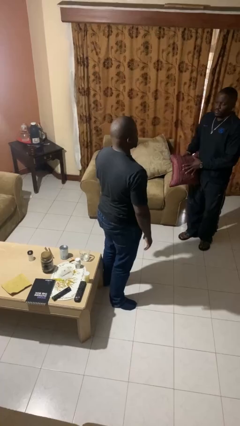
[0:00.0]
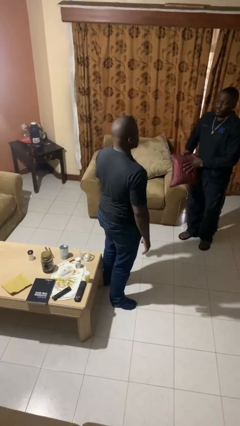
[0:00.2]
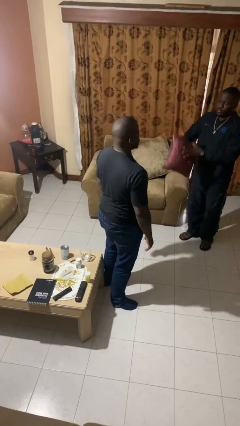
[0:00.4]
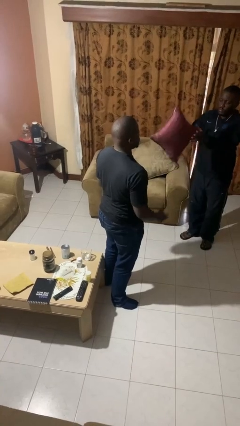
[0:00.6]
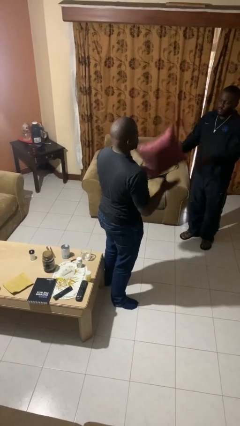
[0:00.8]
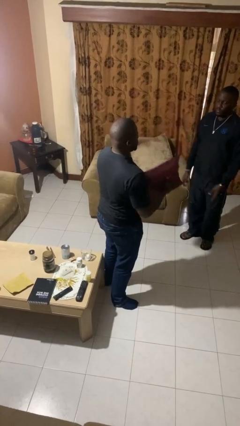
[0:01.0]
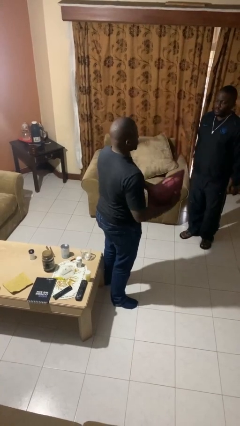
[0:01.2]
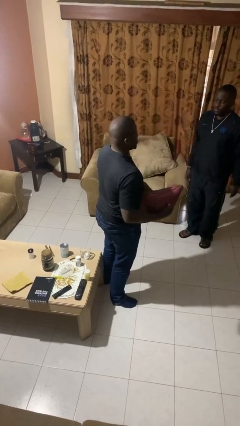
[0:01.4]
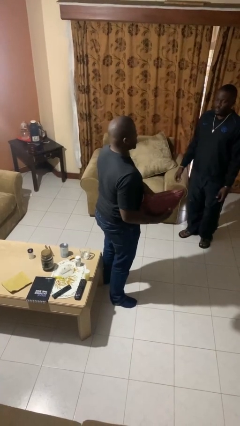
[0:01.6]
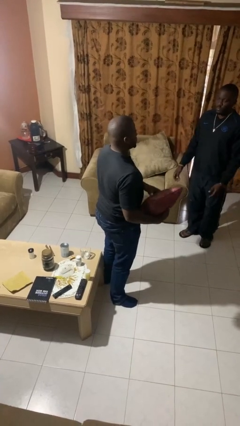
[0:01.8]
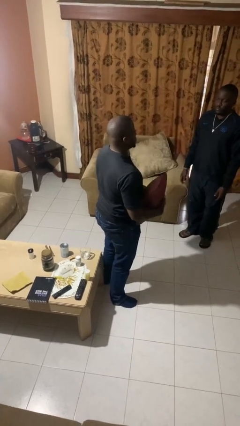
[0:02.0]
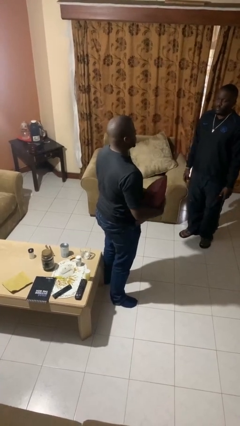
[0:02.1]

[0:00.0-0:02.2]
person catches object from person

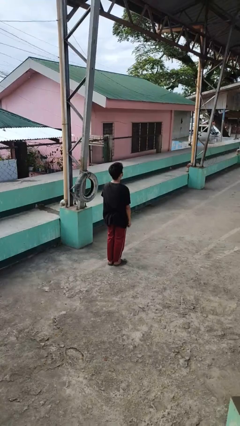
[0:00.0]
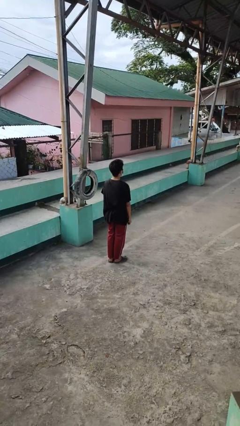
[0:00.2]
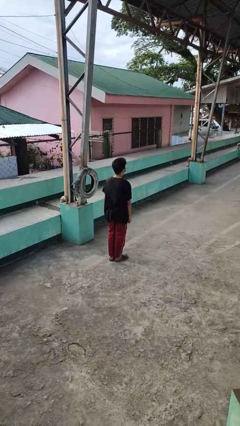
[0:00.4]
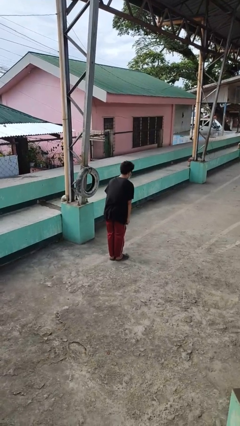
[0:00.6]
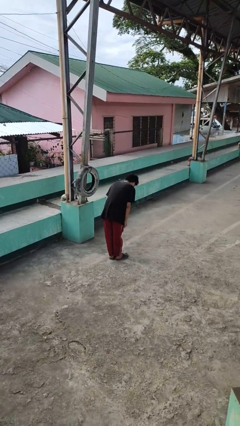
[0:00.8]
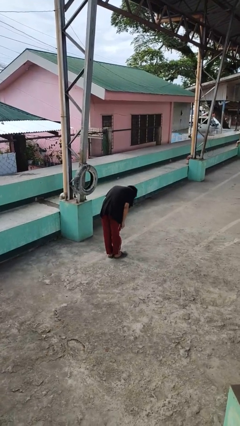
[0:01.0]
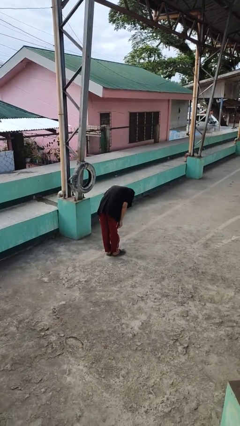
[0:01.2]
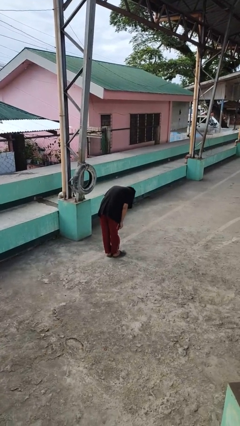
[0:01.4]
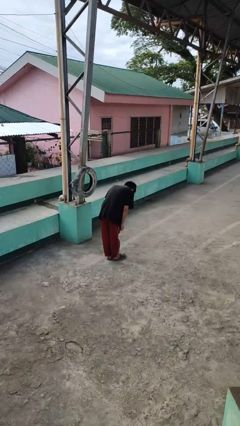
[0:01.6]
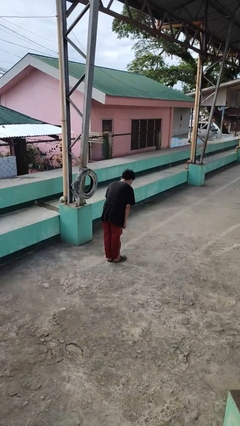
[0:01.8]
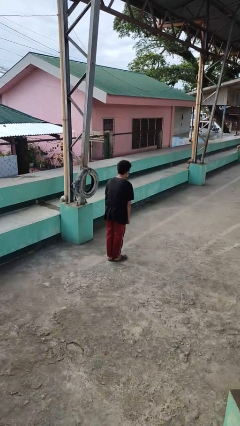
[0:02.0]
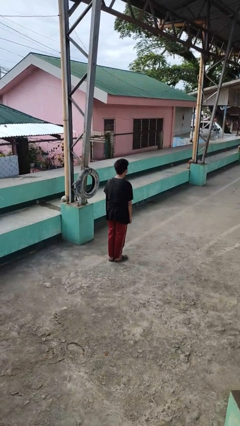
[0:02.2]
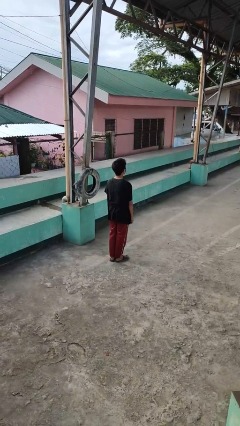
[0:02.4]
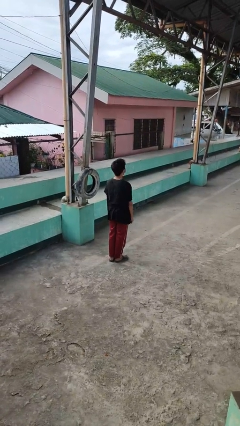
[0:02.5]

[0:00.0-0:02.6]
person bows

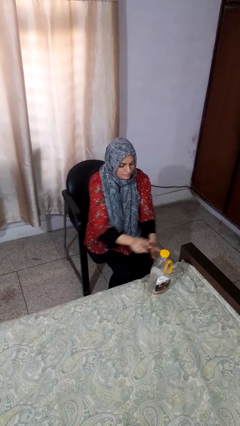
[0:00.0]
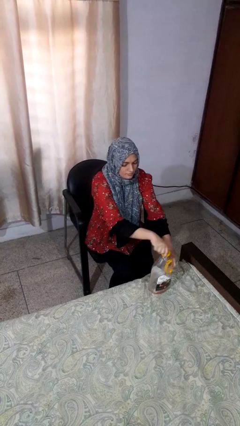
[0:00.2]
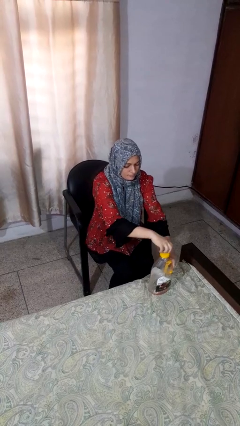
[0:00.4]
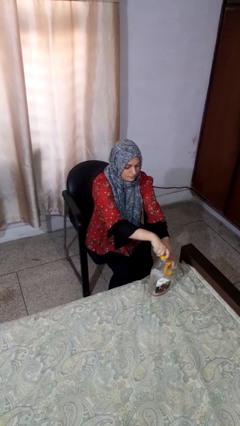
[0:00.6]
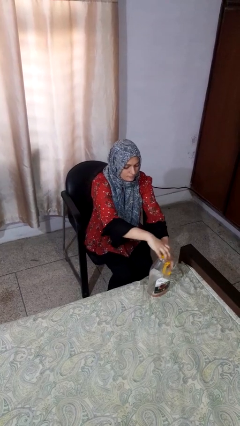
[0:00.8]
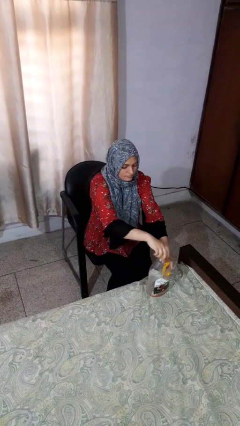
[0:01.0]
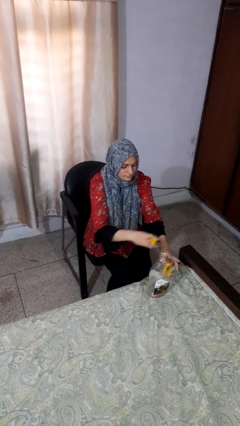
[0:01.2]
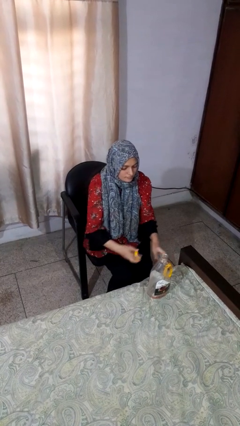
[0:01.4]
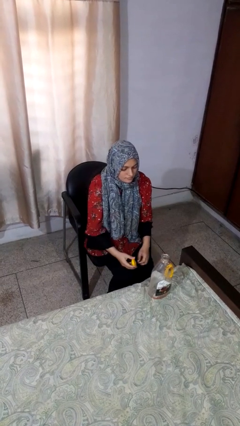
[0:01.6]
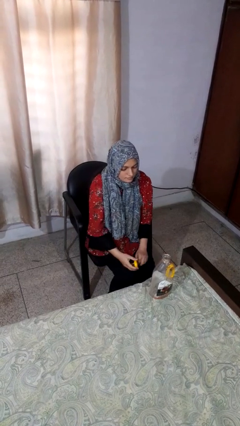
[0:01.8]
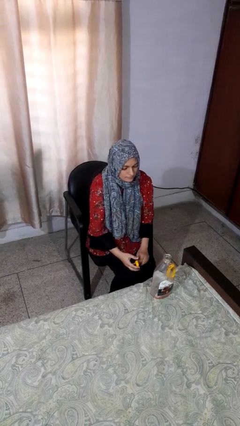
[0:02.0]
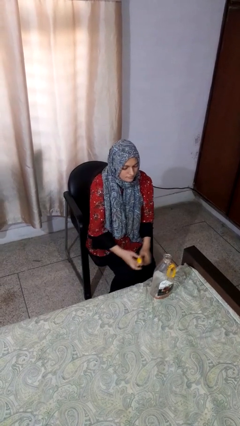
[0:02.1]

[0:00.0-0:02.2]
person unscrews lid from bottle

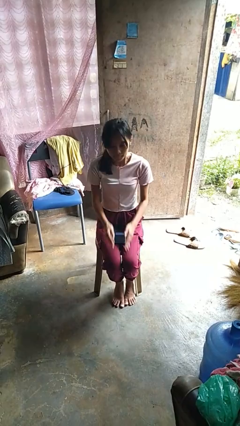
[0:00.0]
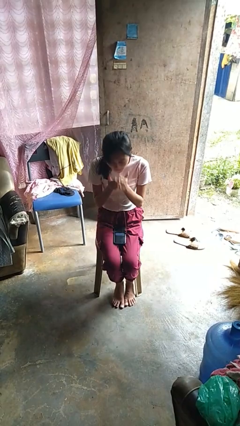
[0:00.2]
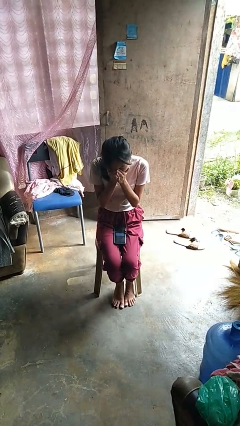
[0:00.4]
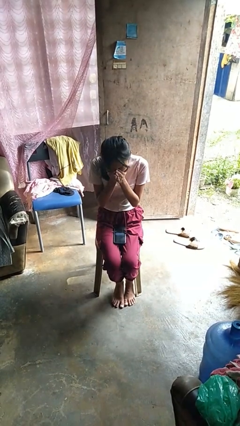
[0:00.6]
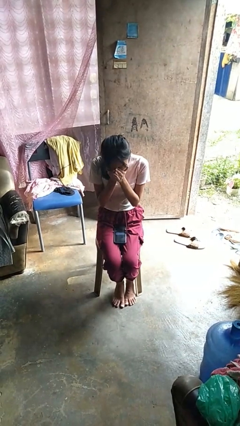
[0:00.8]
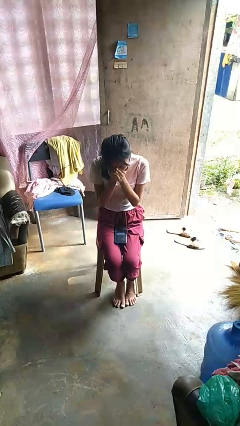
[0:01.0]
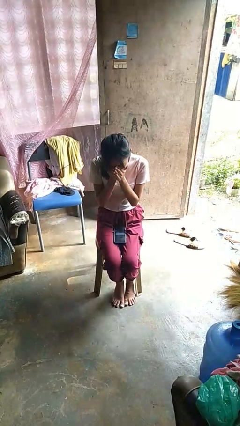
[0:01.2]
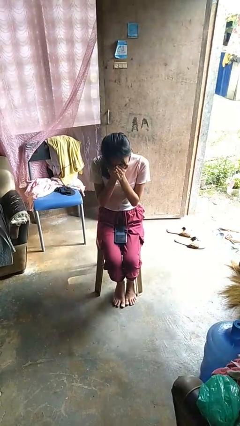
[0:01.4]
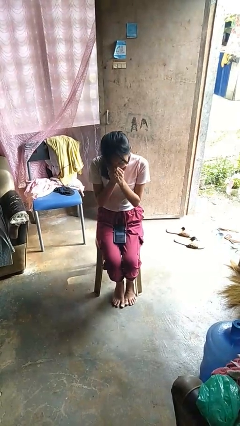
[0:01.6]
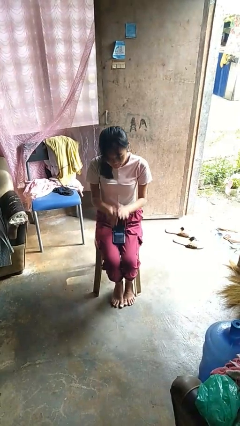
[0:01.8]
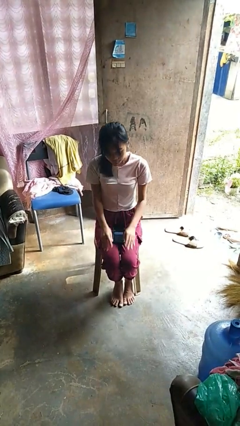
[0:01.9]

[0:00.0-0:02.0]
person sneezes into hand

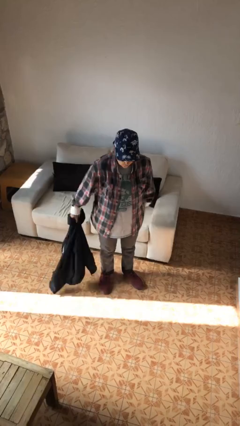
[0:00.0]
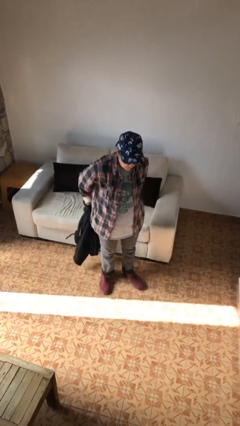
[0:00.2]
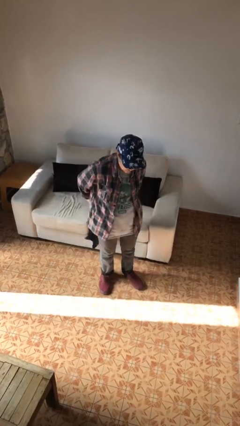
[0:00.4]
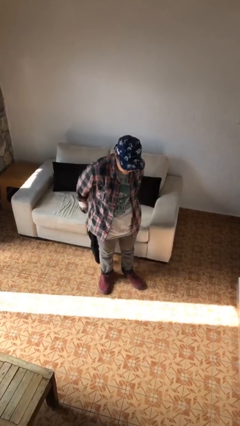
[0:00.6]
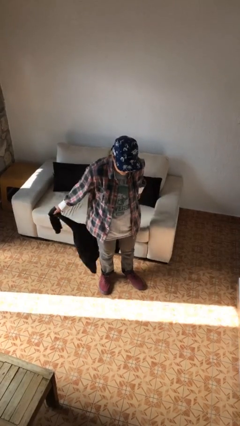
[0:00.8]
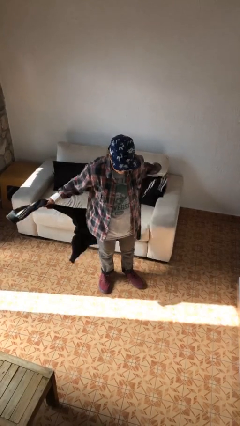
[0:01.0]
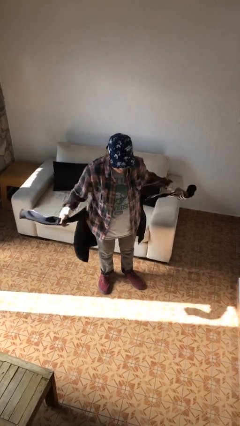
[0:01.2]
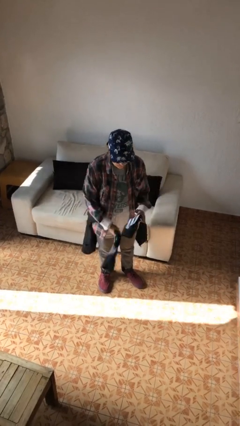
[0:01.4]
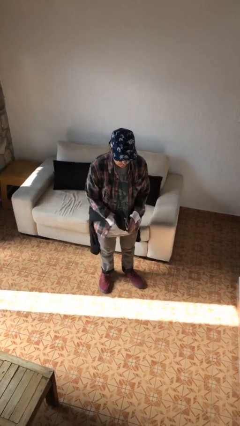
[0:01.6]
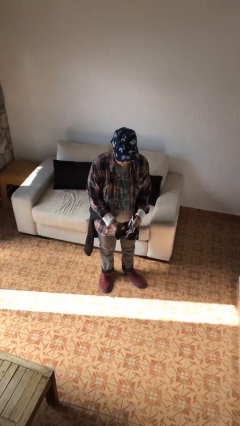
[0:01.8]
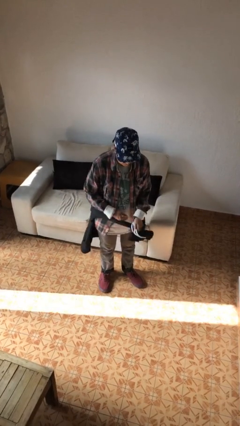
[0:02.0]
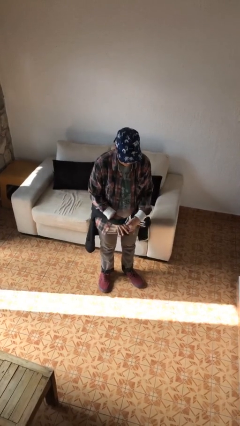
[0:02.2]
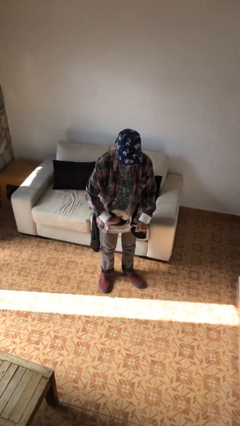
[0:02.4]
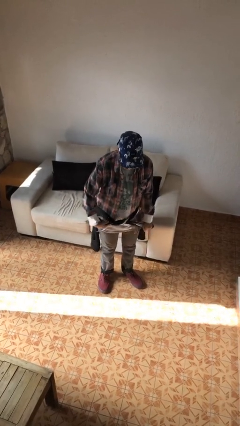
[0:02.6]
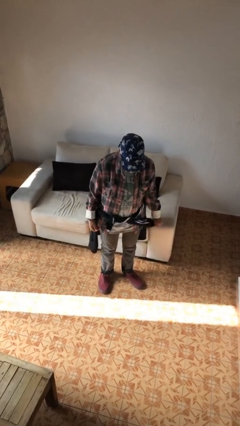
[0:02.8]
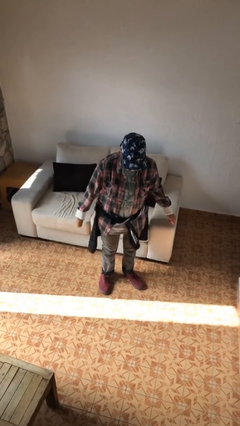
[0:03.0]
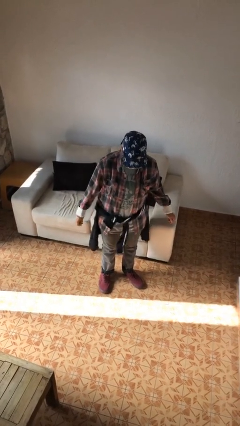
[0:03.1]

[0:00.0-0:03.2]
person ties jacket around waist

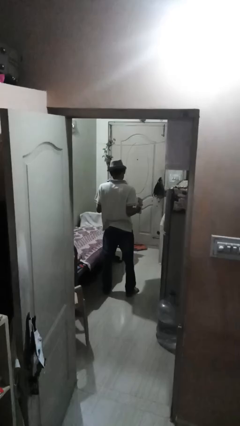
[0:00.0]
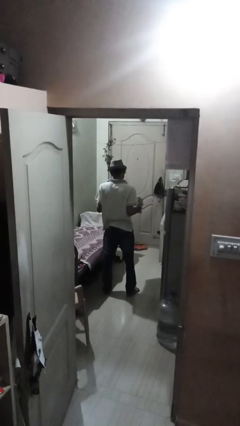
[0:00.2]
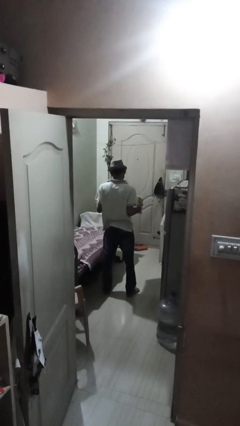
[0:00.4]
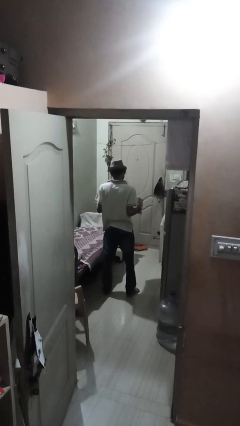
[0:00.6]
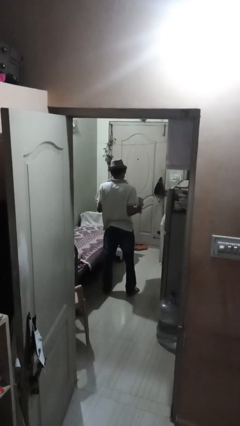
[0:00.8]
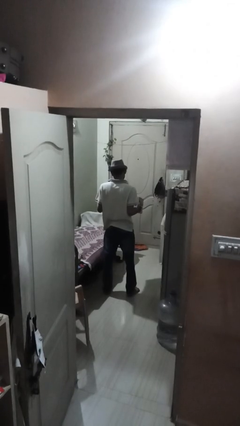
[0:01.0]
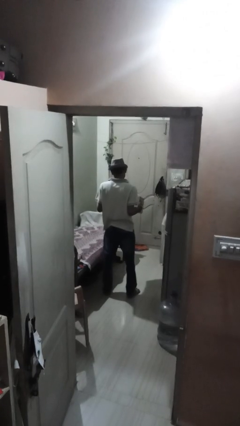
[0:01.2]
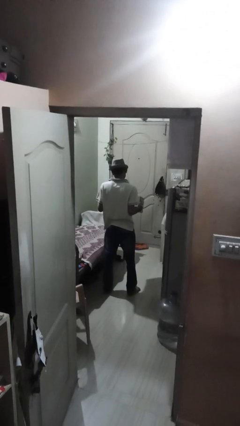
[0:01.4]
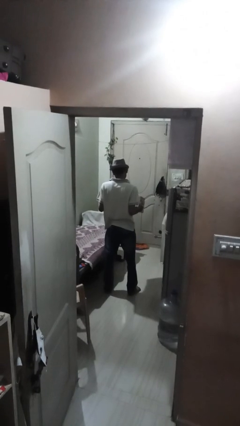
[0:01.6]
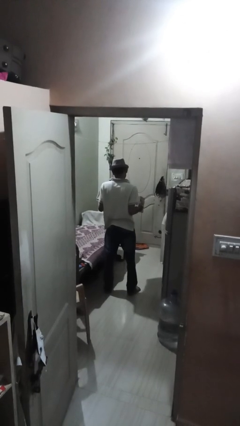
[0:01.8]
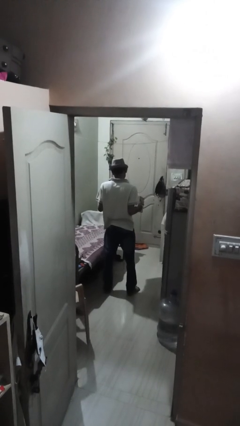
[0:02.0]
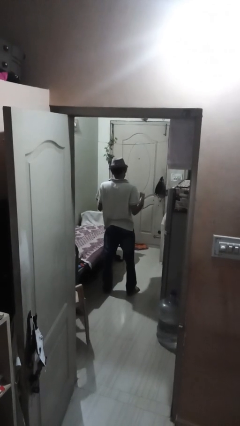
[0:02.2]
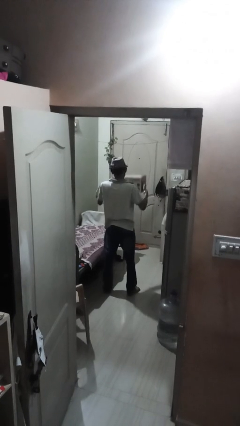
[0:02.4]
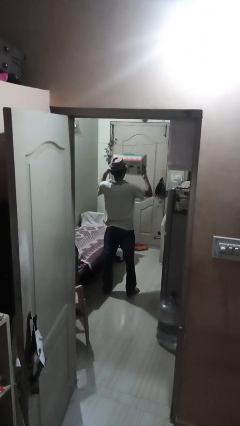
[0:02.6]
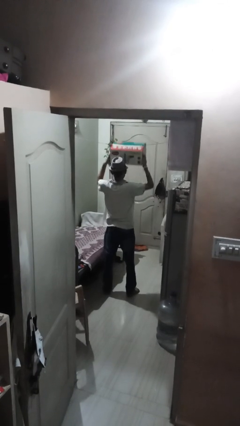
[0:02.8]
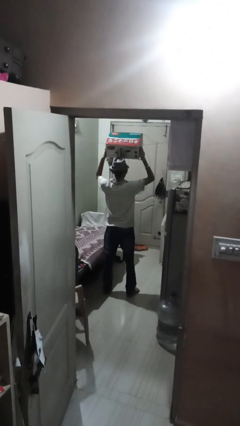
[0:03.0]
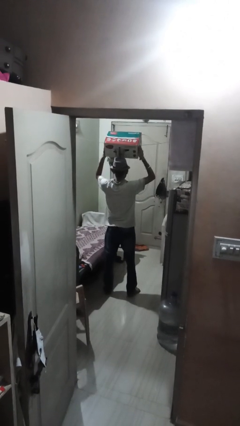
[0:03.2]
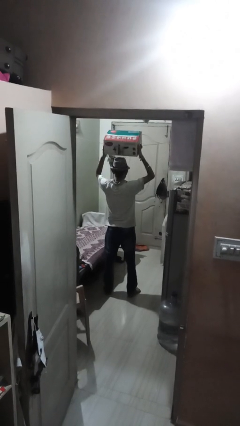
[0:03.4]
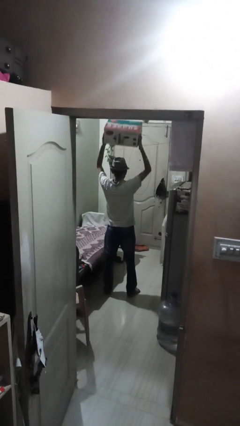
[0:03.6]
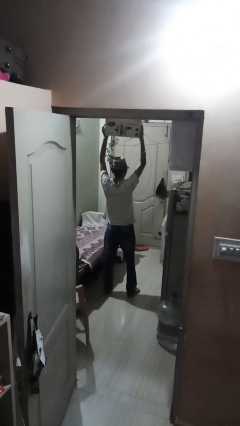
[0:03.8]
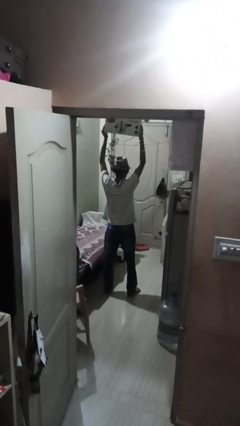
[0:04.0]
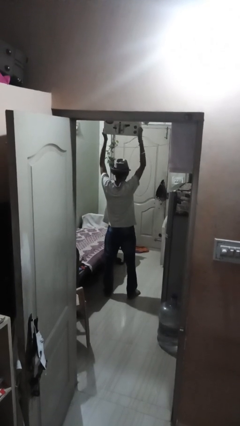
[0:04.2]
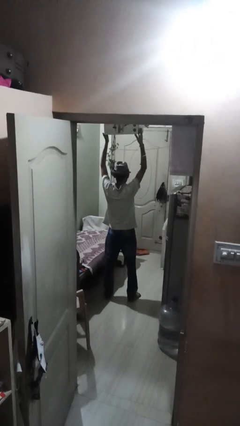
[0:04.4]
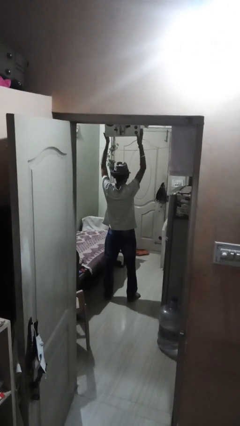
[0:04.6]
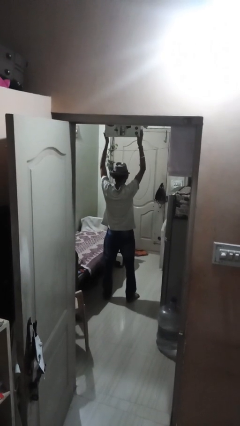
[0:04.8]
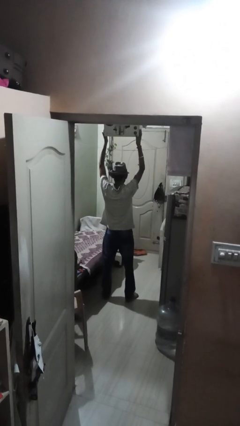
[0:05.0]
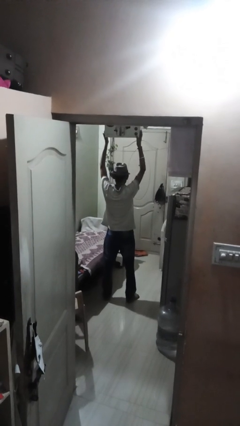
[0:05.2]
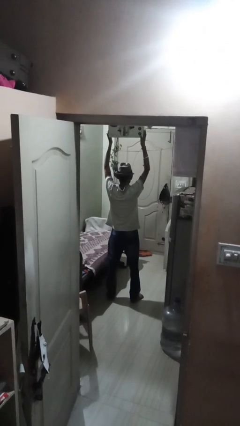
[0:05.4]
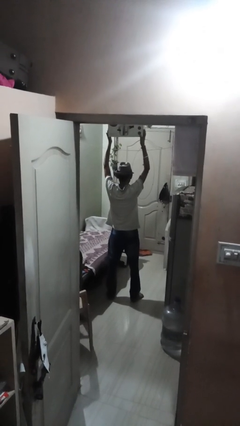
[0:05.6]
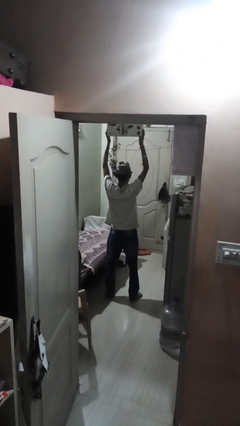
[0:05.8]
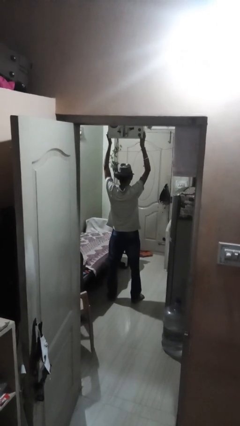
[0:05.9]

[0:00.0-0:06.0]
person holds object above head
